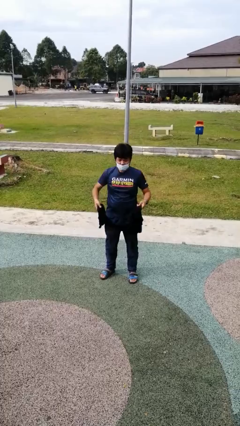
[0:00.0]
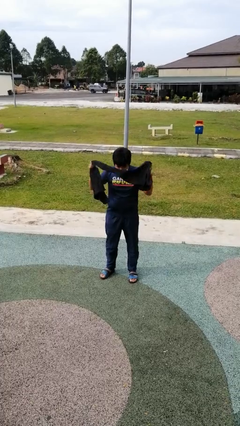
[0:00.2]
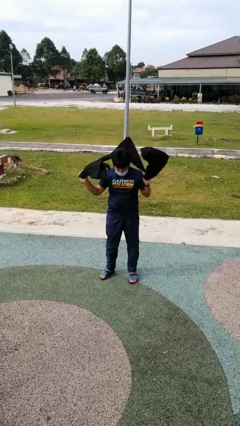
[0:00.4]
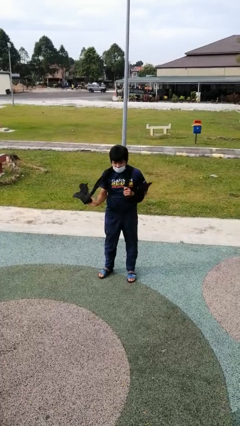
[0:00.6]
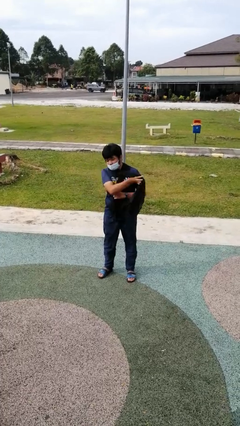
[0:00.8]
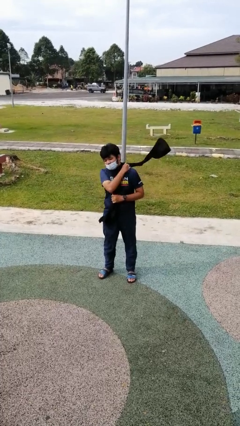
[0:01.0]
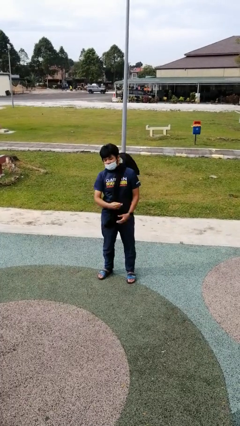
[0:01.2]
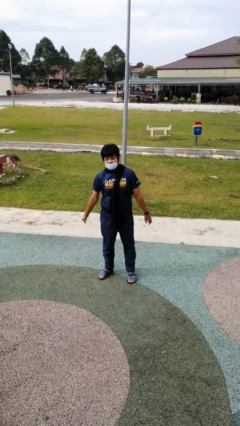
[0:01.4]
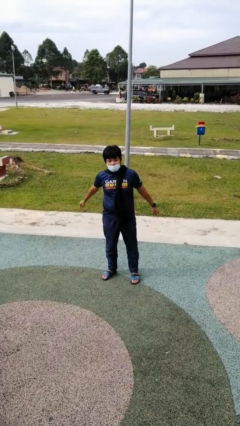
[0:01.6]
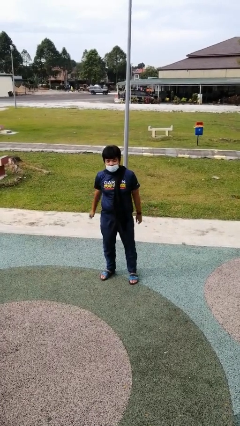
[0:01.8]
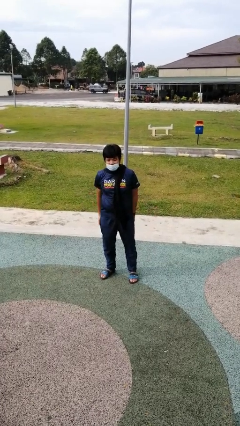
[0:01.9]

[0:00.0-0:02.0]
person puts on scarf

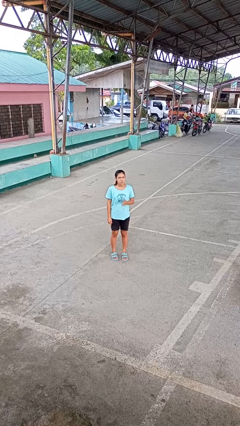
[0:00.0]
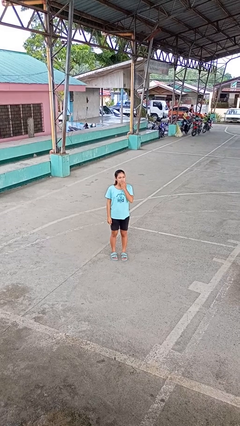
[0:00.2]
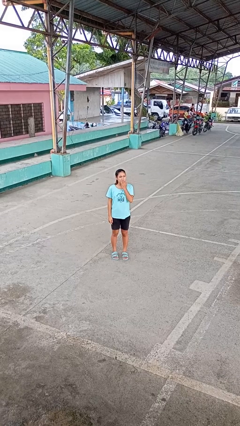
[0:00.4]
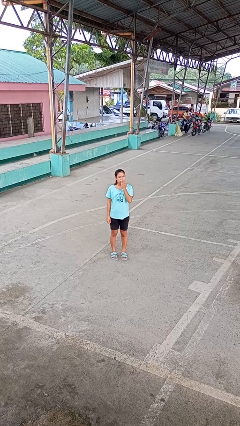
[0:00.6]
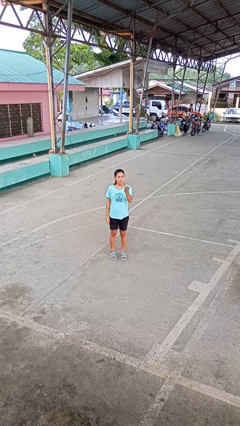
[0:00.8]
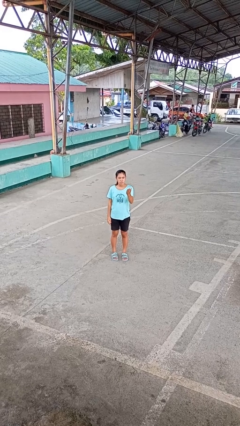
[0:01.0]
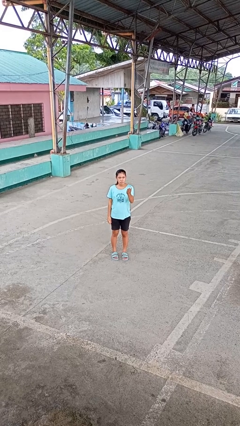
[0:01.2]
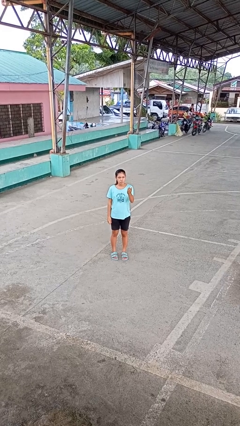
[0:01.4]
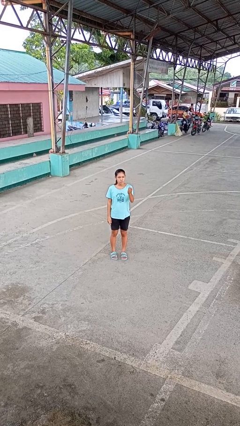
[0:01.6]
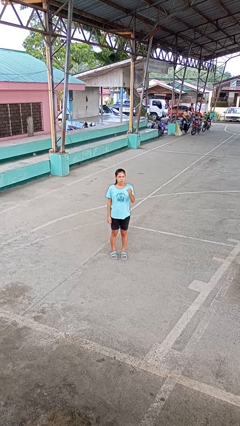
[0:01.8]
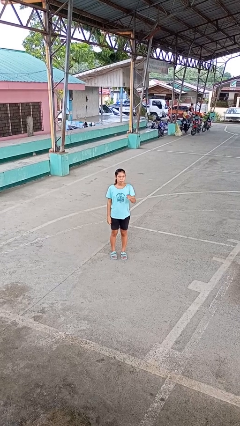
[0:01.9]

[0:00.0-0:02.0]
person gestures blow kiss

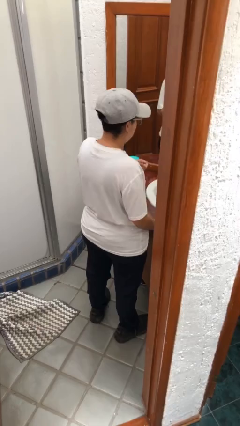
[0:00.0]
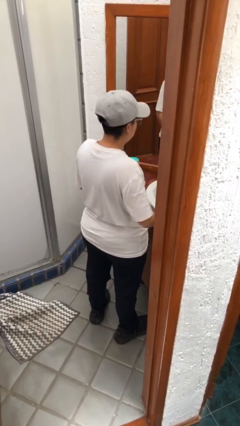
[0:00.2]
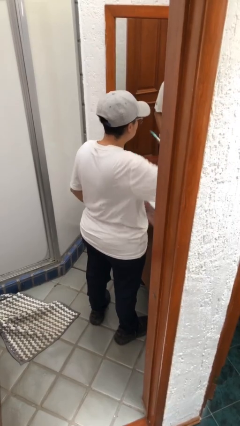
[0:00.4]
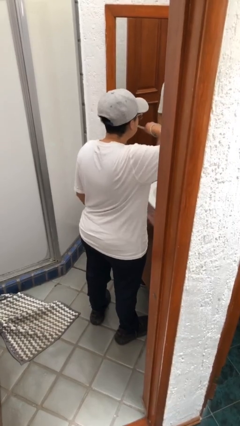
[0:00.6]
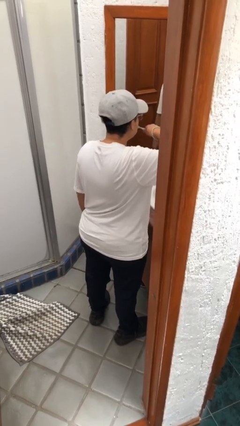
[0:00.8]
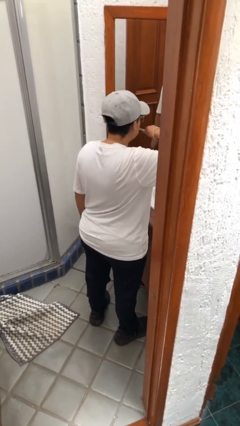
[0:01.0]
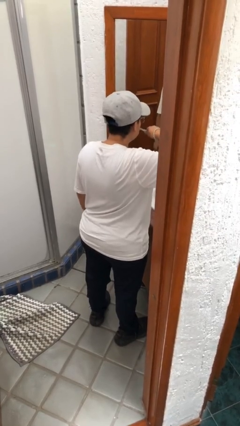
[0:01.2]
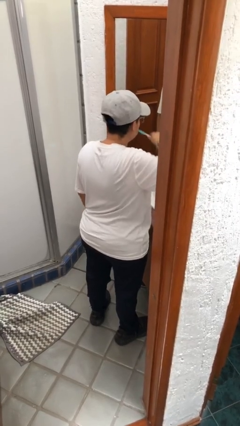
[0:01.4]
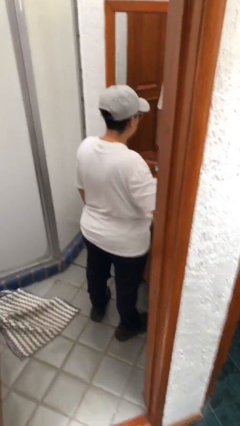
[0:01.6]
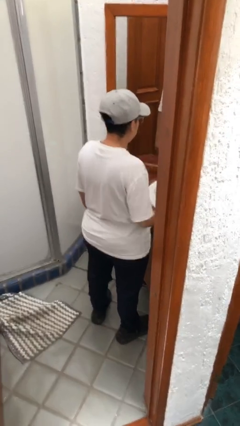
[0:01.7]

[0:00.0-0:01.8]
person brushes teeth

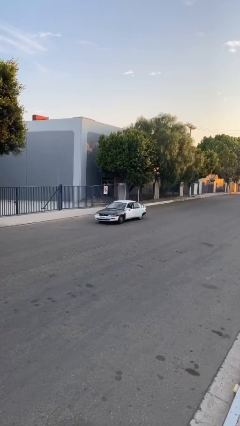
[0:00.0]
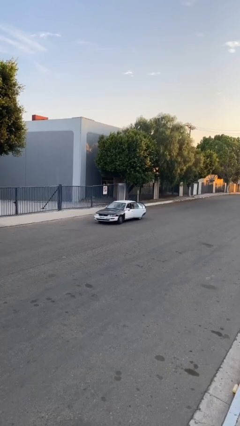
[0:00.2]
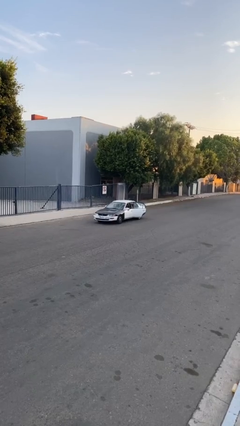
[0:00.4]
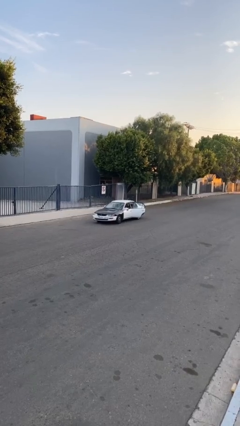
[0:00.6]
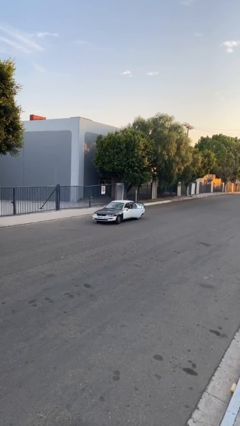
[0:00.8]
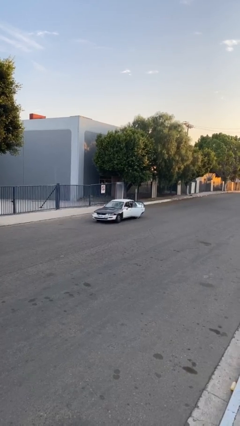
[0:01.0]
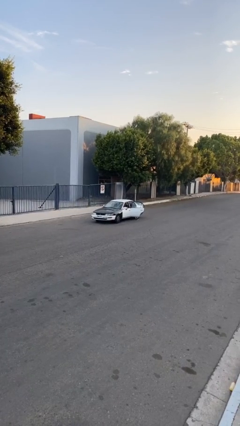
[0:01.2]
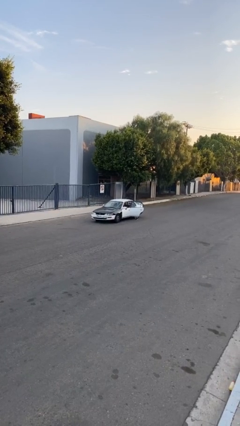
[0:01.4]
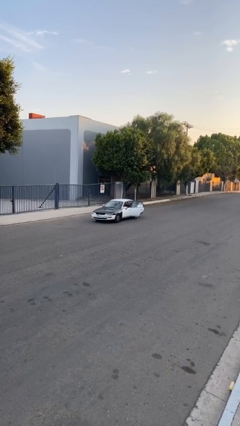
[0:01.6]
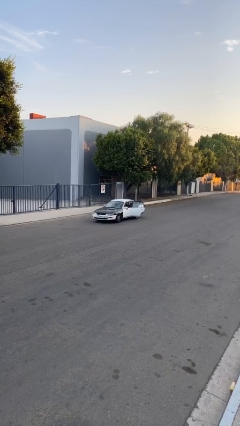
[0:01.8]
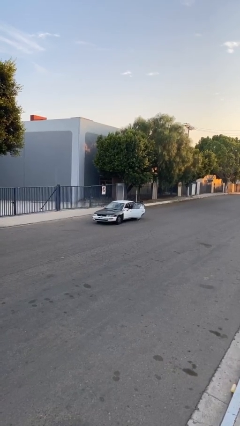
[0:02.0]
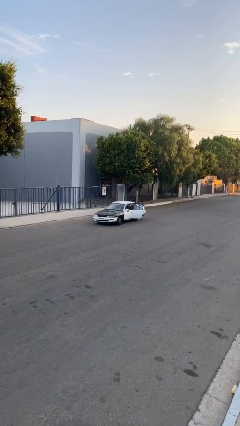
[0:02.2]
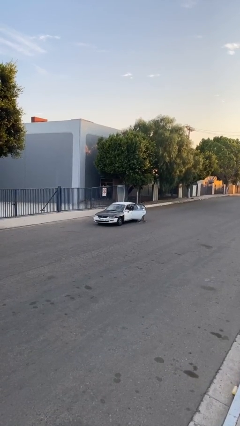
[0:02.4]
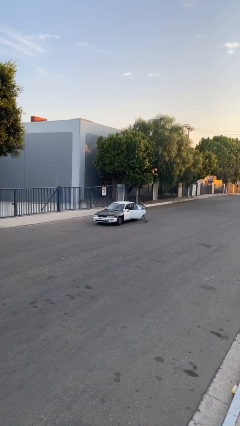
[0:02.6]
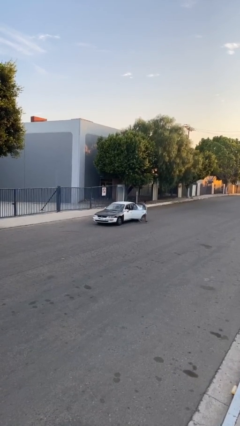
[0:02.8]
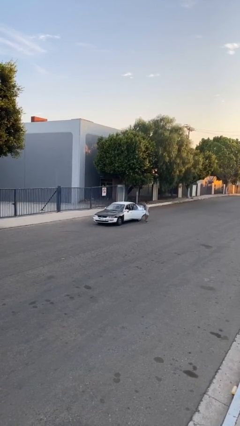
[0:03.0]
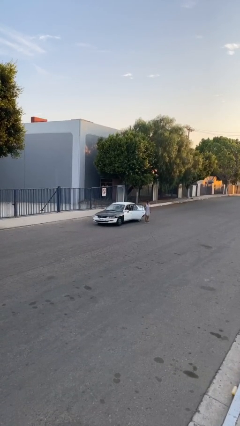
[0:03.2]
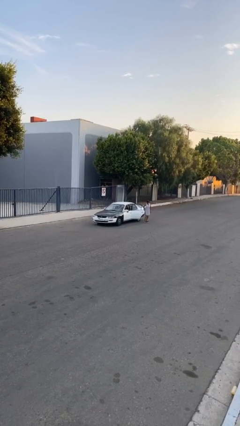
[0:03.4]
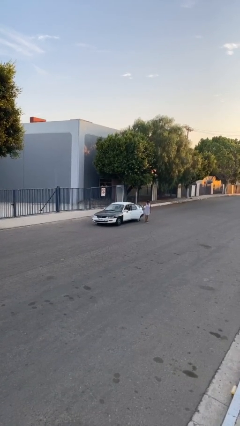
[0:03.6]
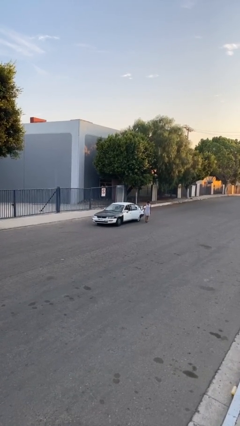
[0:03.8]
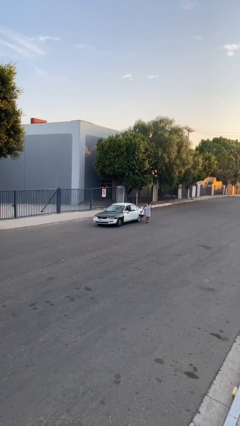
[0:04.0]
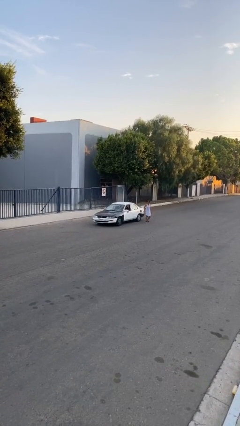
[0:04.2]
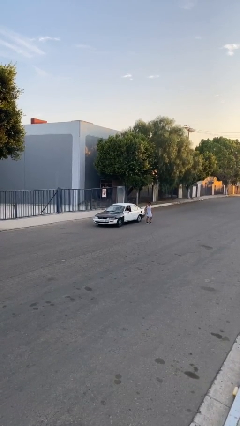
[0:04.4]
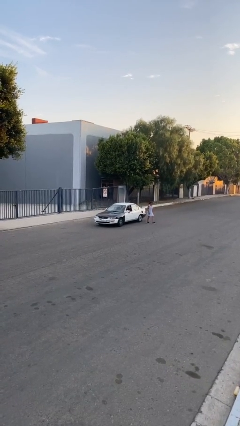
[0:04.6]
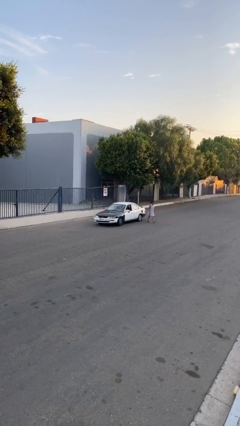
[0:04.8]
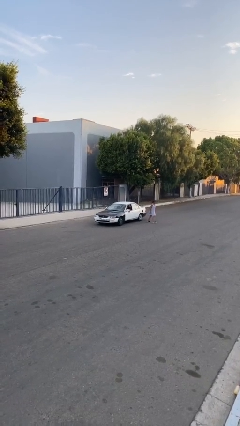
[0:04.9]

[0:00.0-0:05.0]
car drops off person

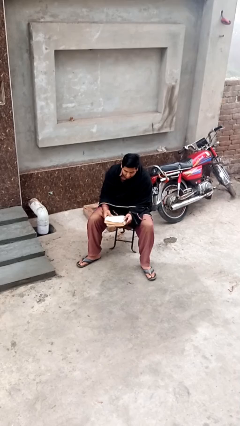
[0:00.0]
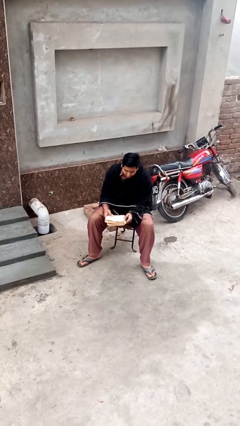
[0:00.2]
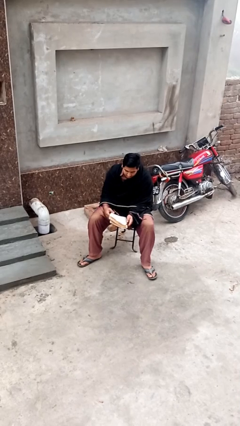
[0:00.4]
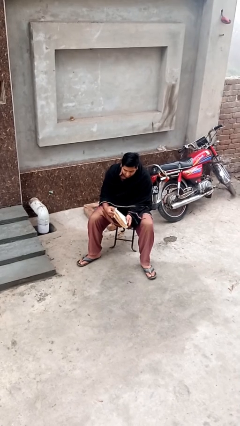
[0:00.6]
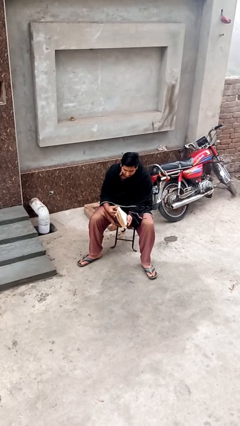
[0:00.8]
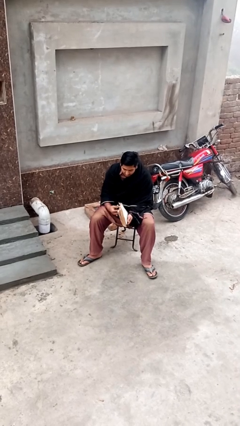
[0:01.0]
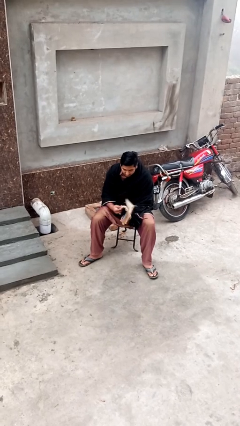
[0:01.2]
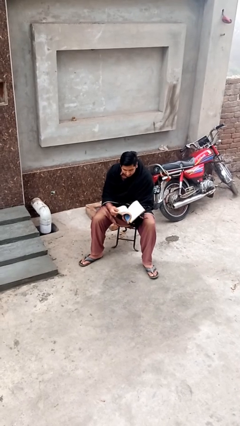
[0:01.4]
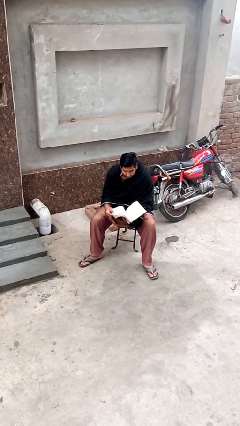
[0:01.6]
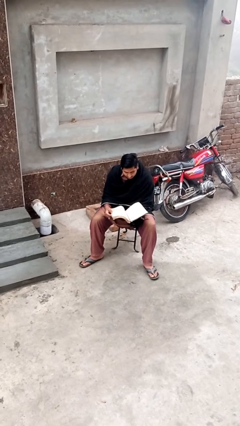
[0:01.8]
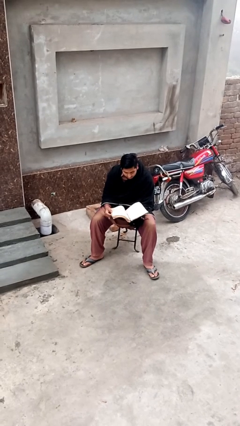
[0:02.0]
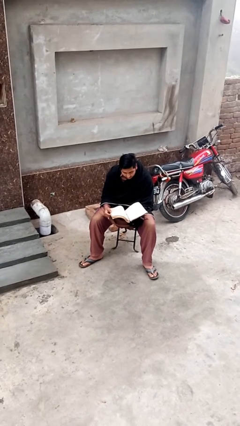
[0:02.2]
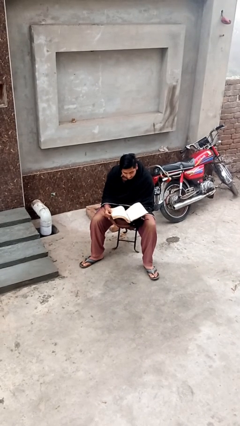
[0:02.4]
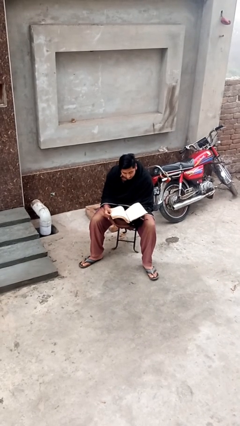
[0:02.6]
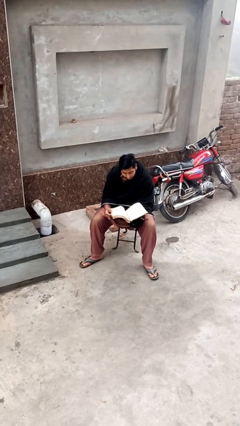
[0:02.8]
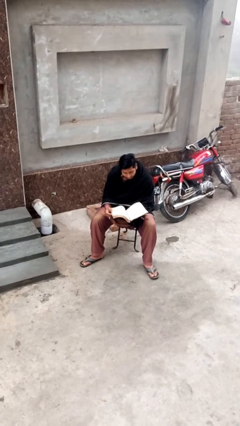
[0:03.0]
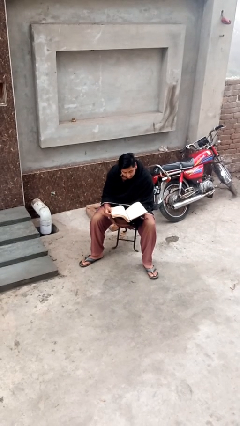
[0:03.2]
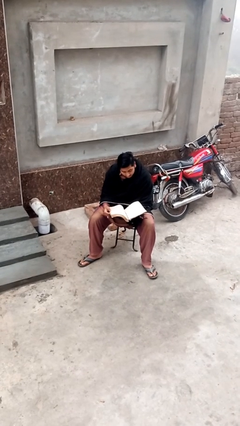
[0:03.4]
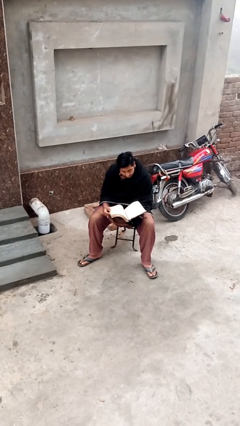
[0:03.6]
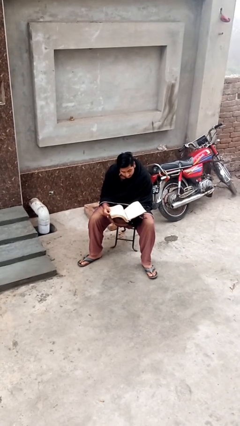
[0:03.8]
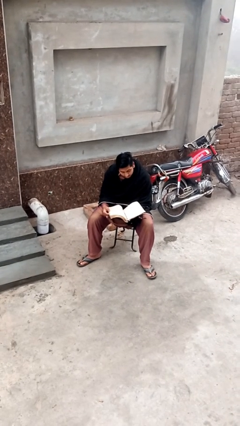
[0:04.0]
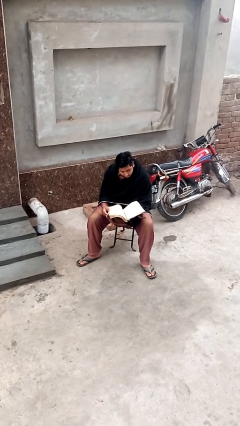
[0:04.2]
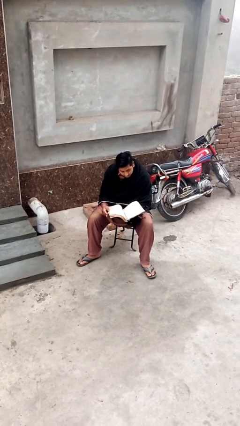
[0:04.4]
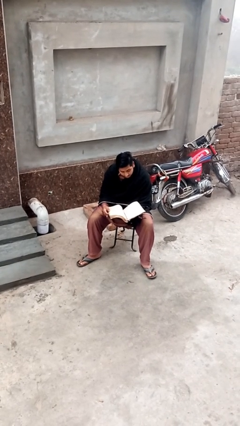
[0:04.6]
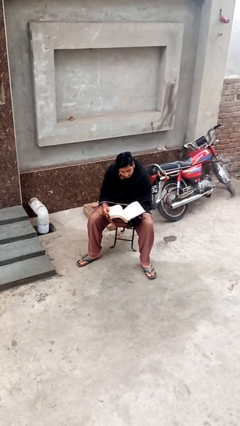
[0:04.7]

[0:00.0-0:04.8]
person reads document

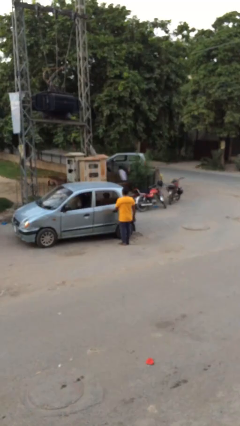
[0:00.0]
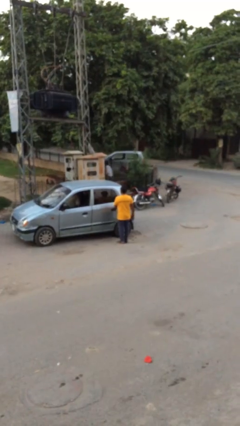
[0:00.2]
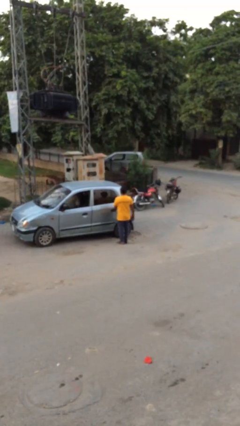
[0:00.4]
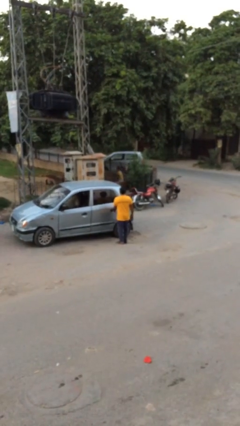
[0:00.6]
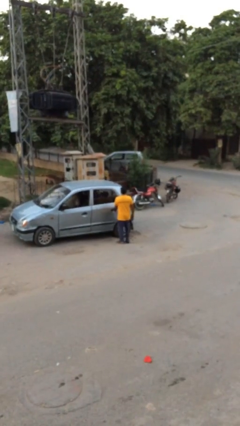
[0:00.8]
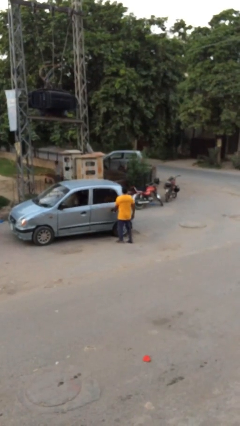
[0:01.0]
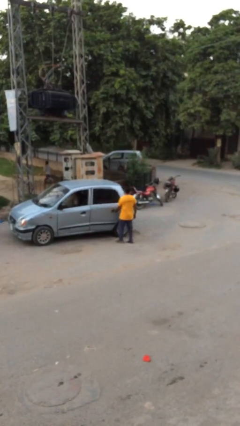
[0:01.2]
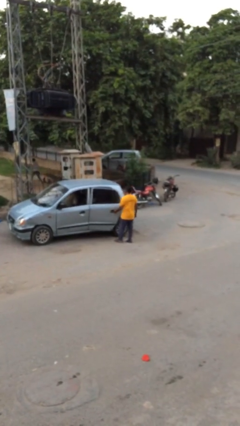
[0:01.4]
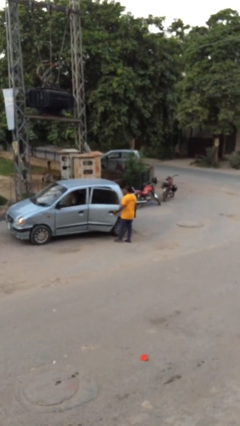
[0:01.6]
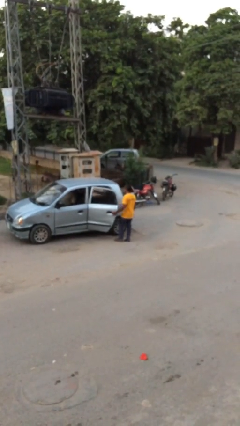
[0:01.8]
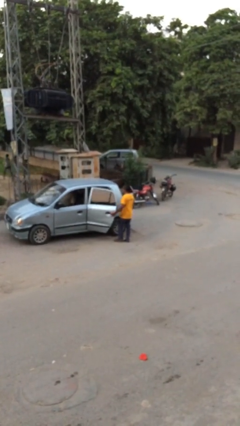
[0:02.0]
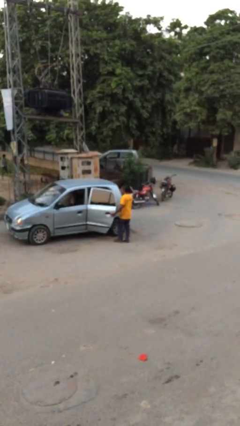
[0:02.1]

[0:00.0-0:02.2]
person opens car door
